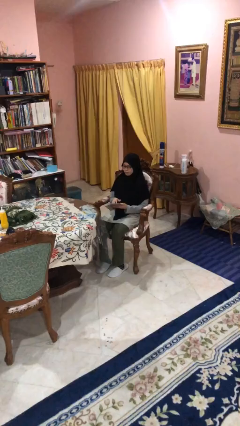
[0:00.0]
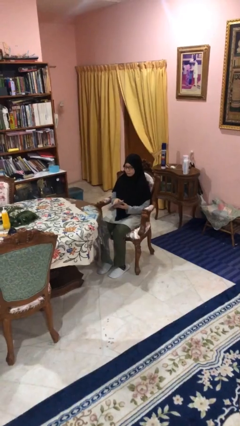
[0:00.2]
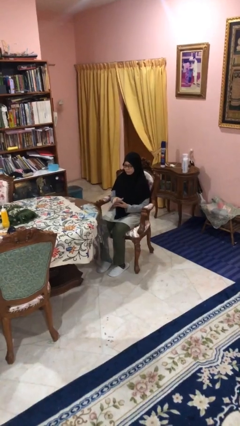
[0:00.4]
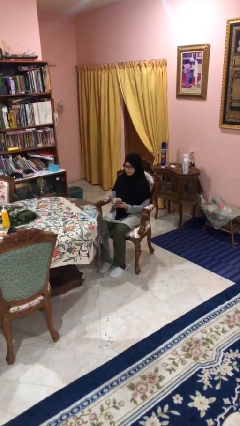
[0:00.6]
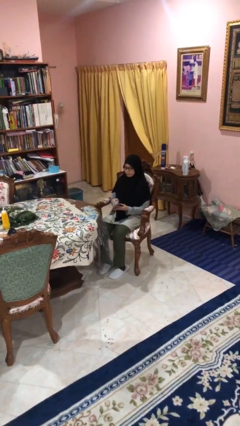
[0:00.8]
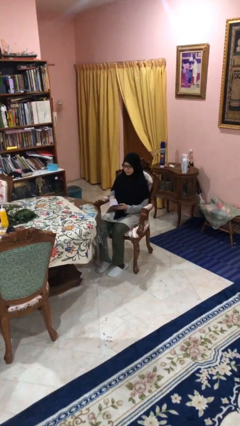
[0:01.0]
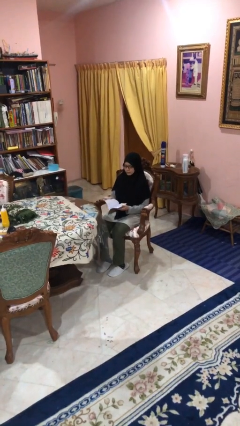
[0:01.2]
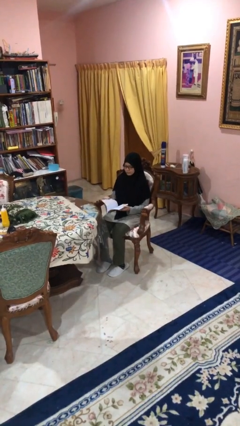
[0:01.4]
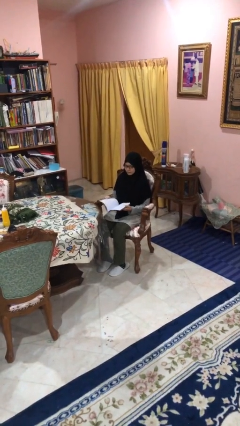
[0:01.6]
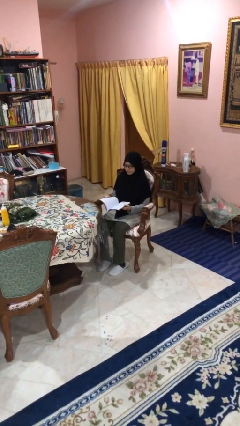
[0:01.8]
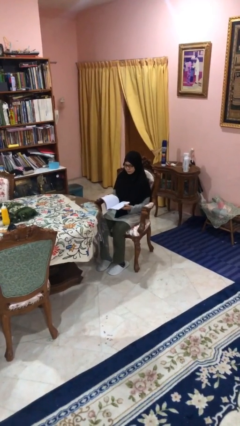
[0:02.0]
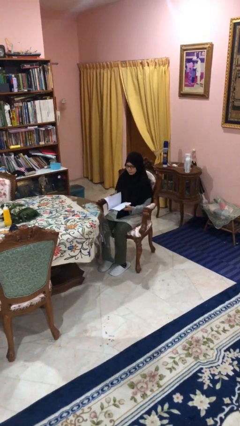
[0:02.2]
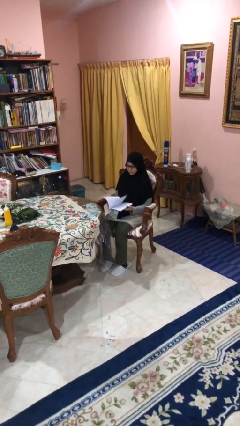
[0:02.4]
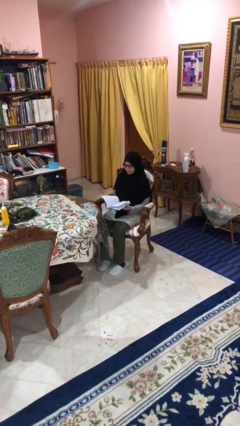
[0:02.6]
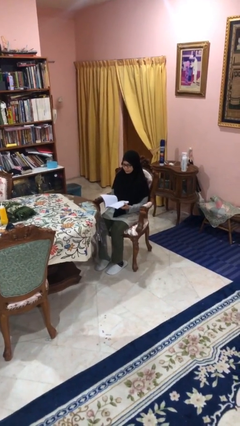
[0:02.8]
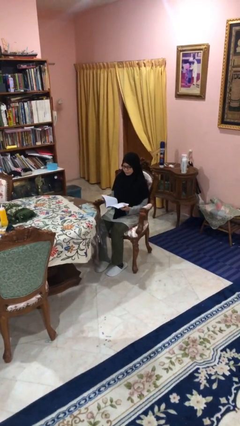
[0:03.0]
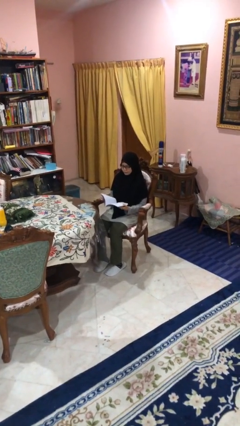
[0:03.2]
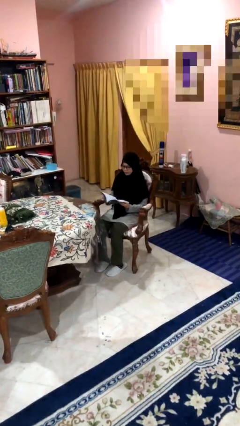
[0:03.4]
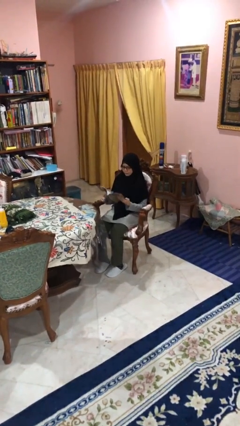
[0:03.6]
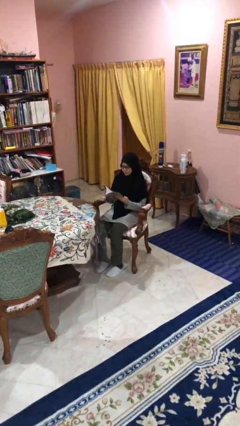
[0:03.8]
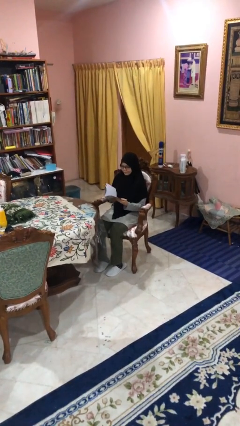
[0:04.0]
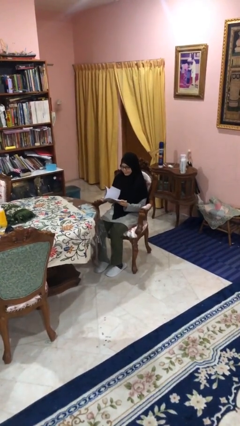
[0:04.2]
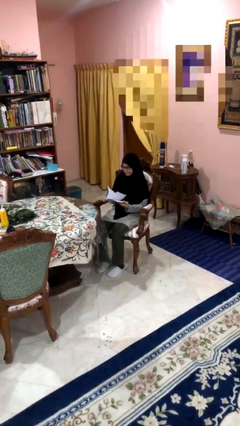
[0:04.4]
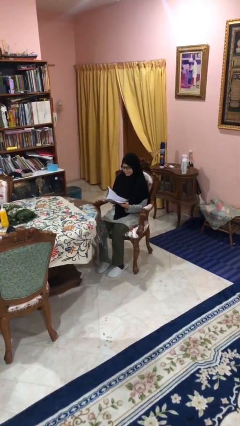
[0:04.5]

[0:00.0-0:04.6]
person reads document

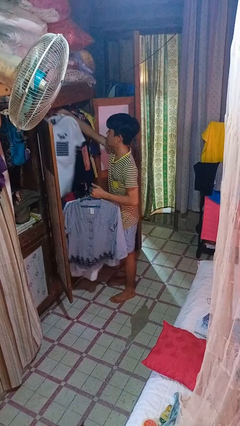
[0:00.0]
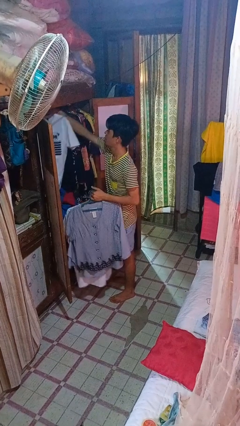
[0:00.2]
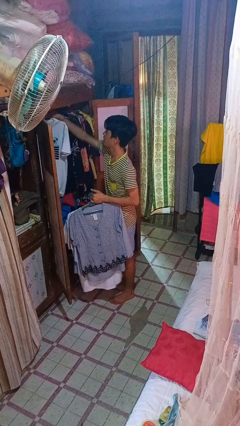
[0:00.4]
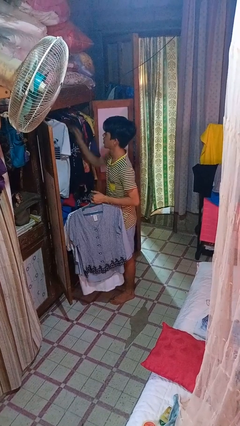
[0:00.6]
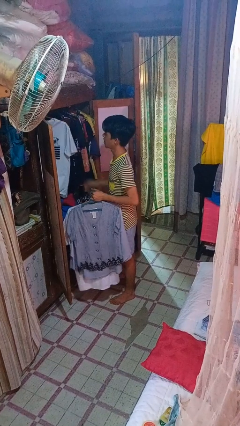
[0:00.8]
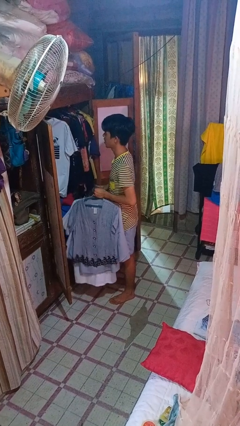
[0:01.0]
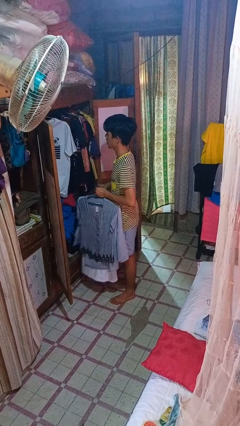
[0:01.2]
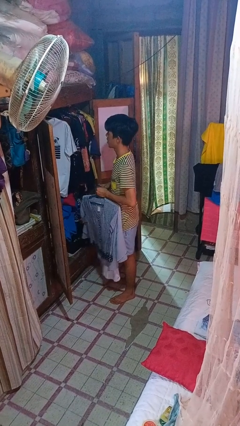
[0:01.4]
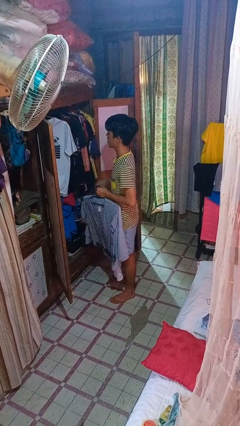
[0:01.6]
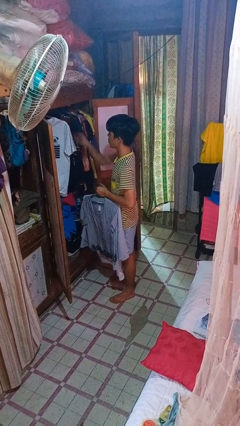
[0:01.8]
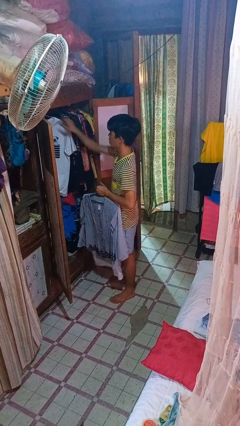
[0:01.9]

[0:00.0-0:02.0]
person puts clothes into closet

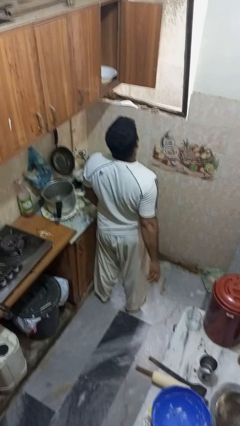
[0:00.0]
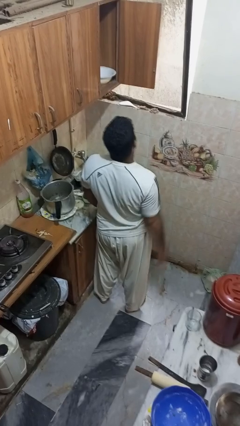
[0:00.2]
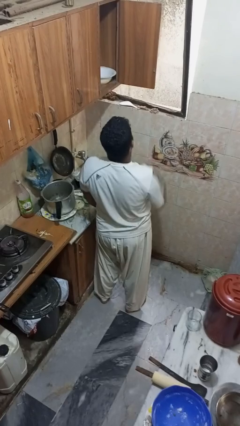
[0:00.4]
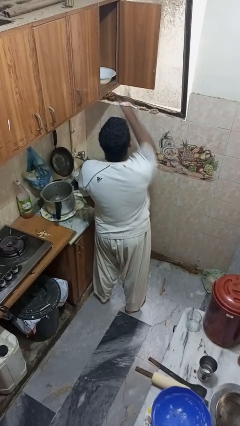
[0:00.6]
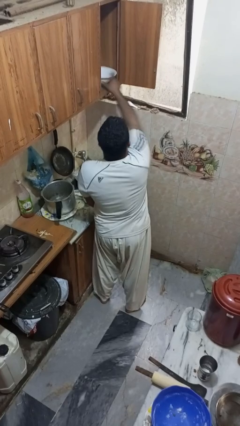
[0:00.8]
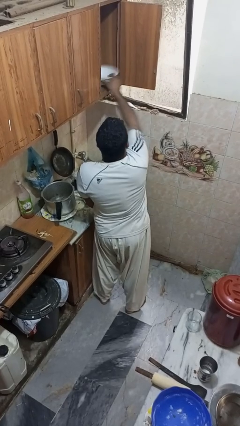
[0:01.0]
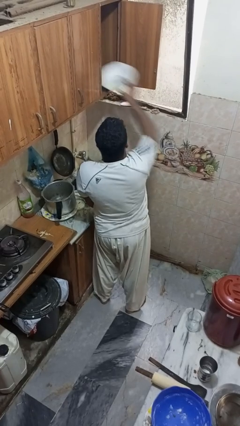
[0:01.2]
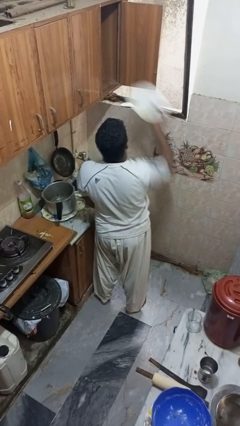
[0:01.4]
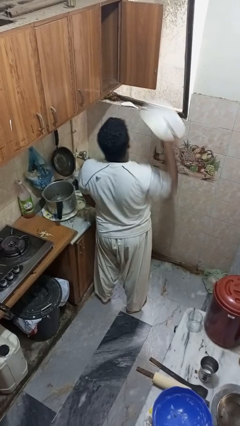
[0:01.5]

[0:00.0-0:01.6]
person takes object from cabinet

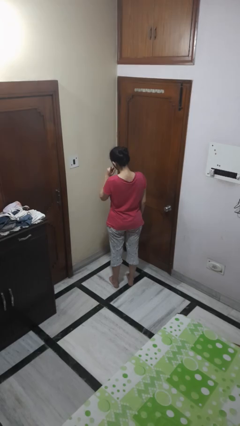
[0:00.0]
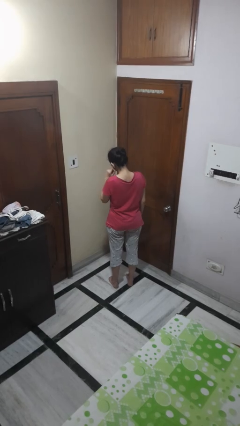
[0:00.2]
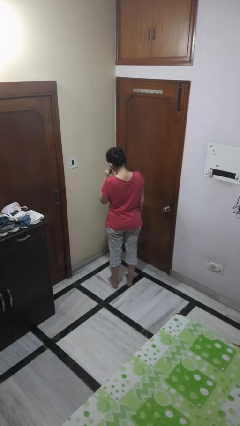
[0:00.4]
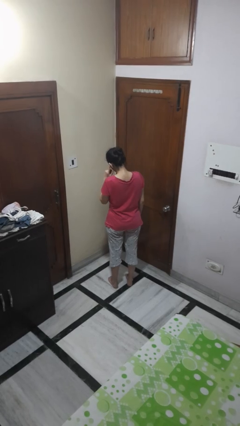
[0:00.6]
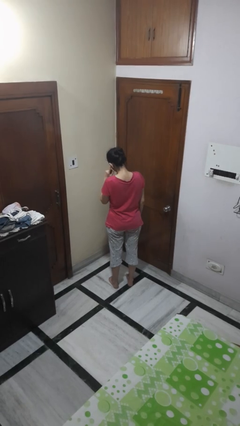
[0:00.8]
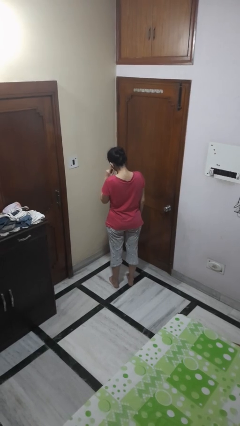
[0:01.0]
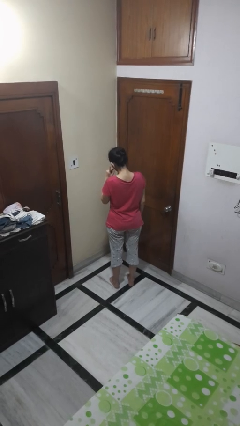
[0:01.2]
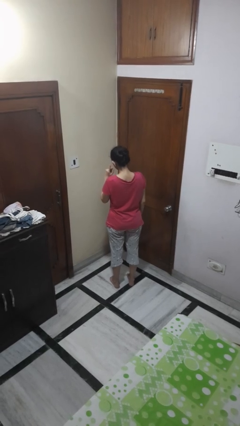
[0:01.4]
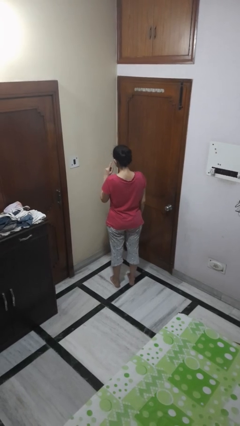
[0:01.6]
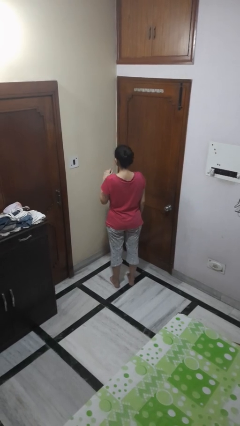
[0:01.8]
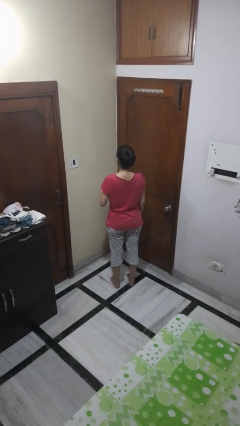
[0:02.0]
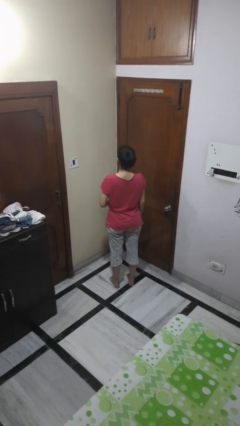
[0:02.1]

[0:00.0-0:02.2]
person gestures listen closely

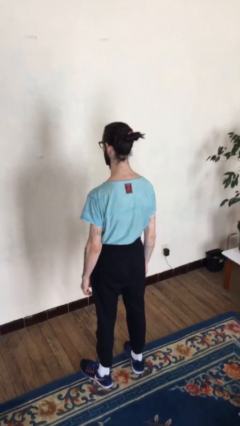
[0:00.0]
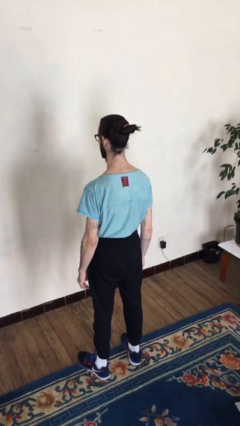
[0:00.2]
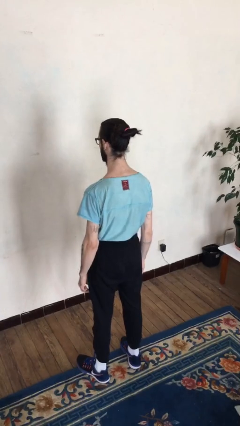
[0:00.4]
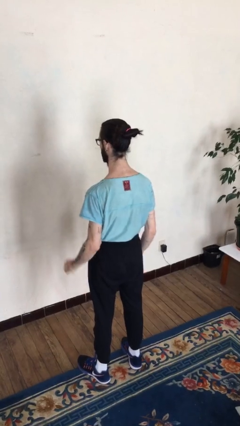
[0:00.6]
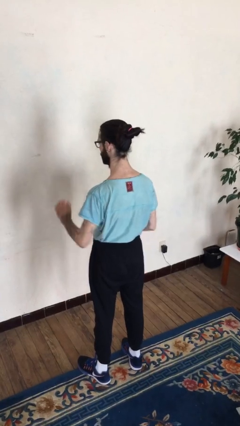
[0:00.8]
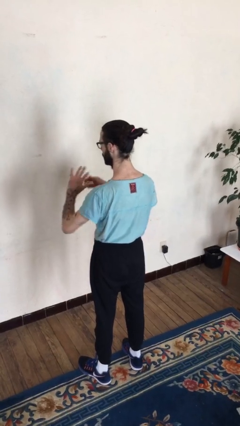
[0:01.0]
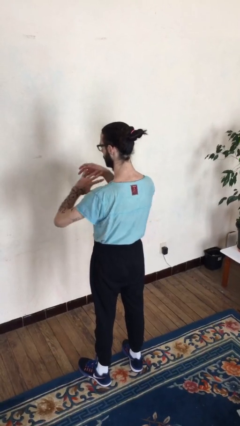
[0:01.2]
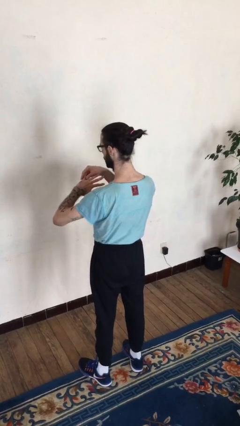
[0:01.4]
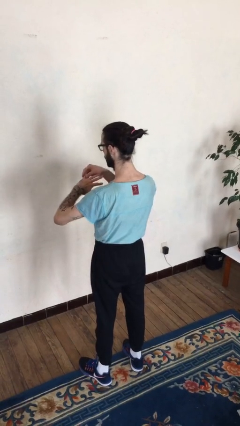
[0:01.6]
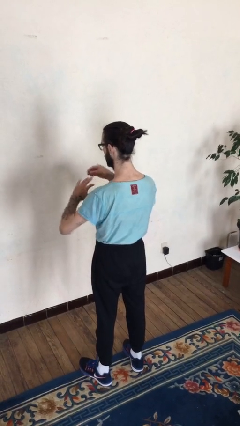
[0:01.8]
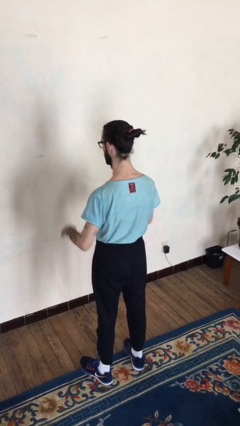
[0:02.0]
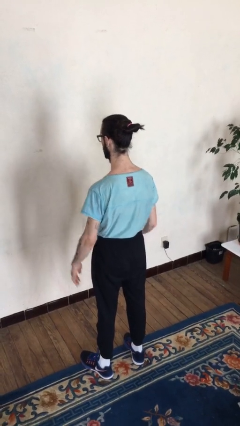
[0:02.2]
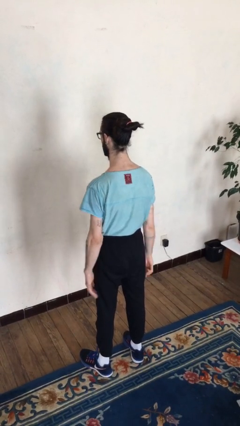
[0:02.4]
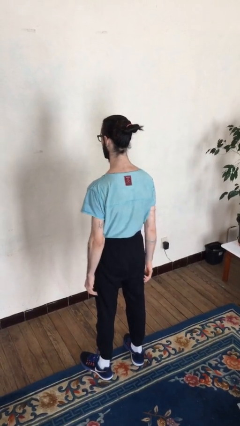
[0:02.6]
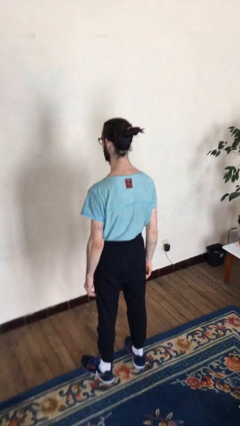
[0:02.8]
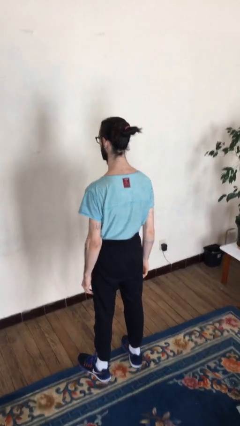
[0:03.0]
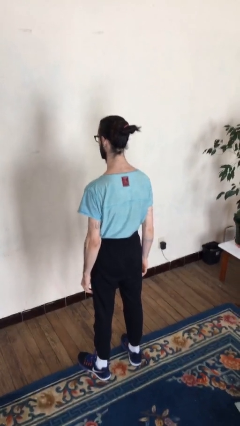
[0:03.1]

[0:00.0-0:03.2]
person takes off ring

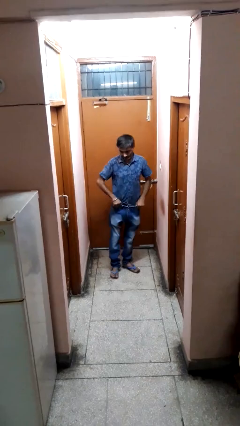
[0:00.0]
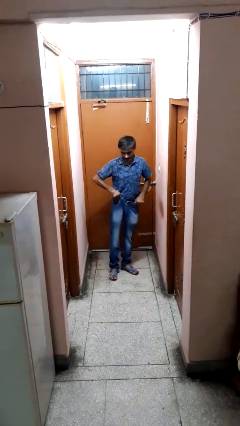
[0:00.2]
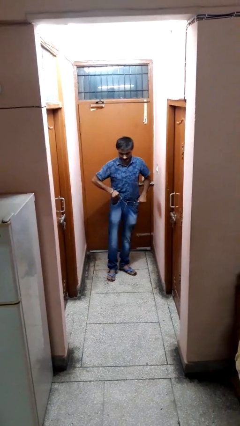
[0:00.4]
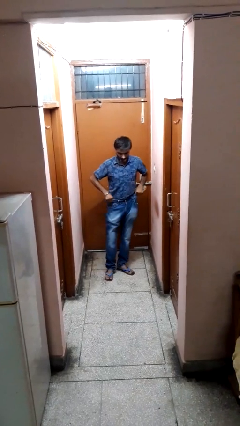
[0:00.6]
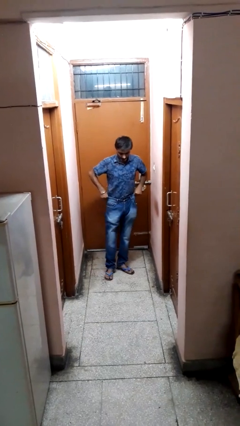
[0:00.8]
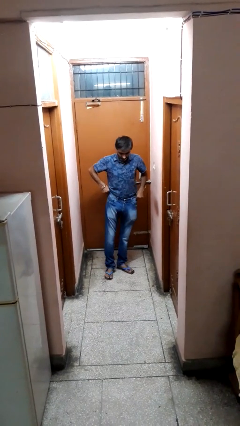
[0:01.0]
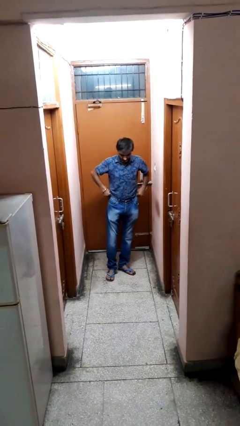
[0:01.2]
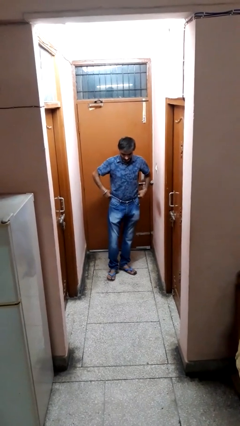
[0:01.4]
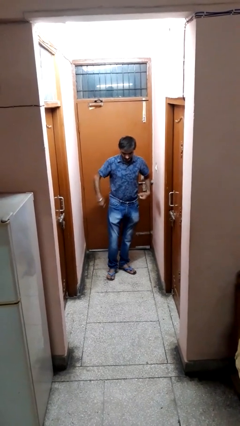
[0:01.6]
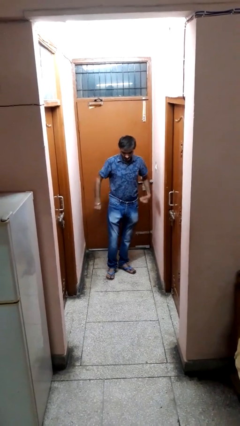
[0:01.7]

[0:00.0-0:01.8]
person hikes up pants

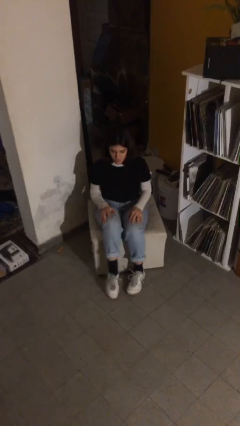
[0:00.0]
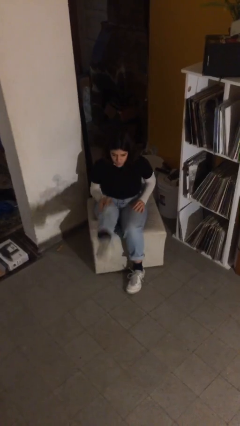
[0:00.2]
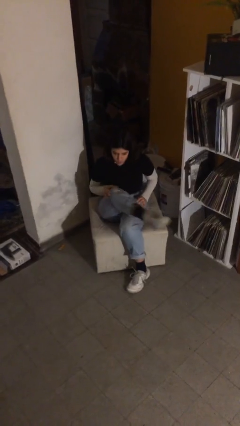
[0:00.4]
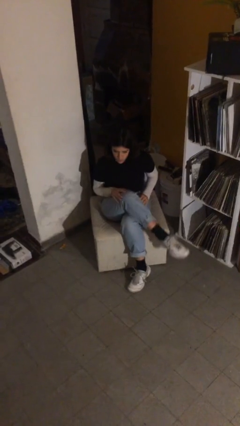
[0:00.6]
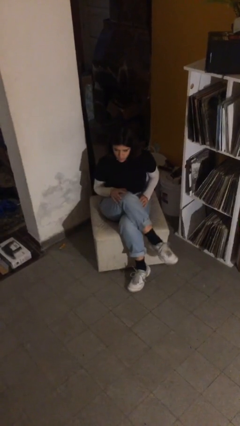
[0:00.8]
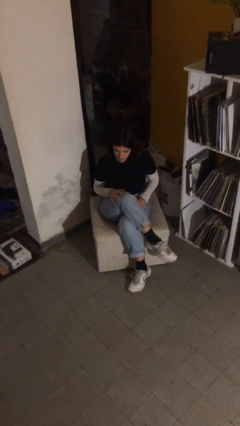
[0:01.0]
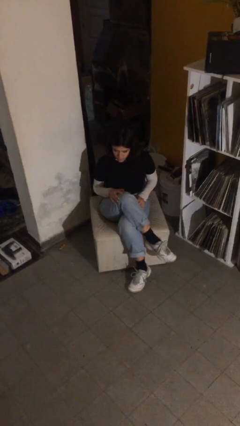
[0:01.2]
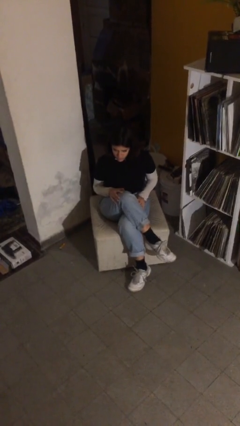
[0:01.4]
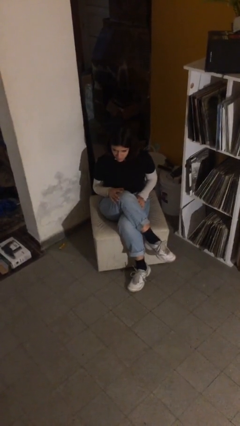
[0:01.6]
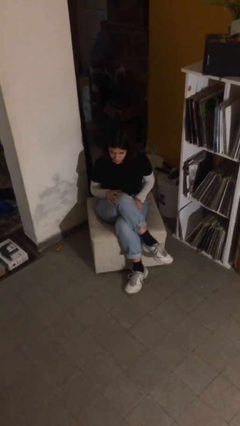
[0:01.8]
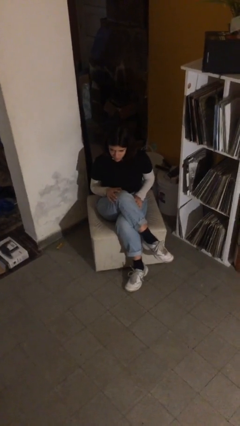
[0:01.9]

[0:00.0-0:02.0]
person crosses legs
